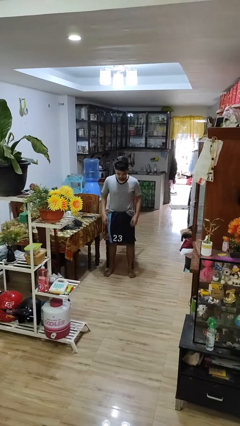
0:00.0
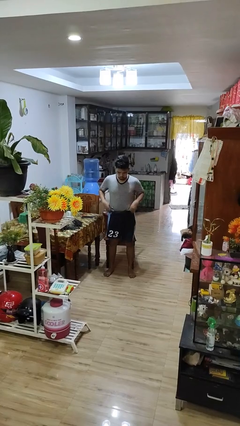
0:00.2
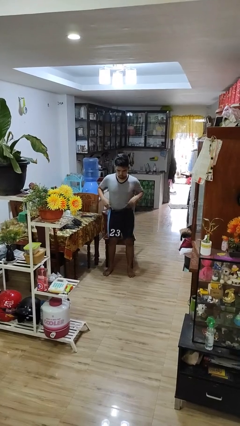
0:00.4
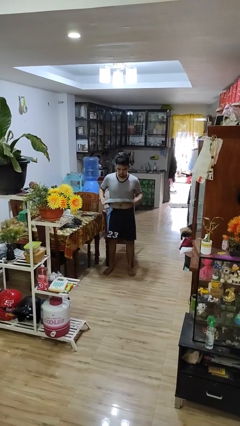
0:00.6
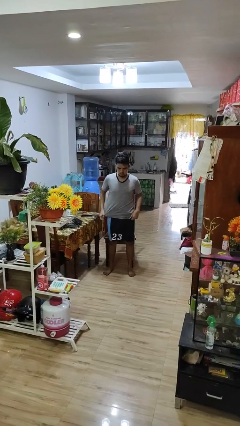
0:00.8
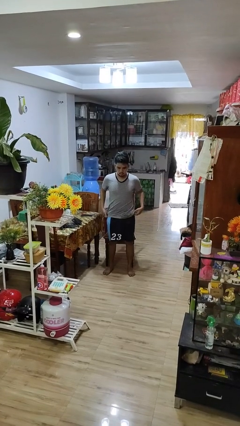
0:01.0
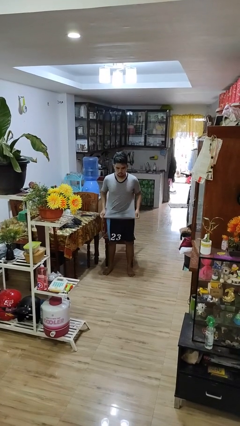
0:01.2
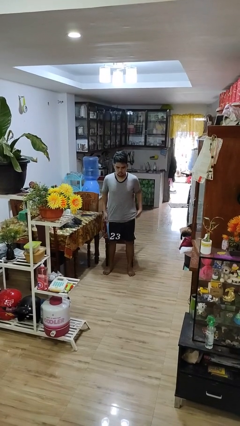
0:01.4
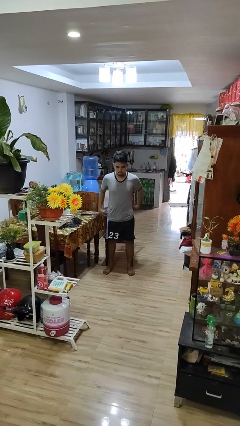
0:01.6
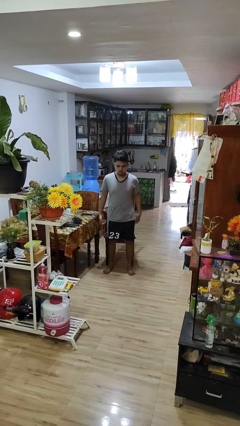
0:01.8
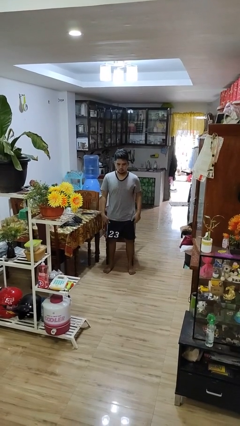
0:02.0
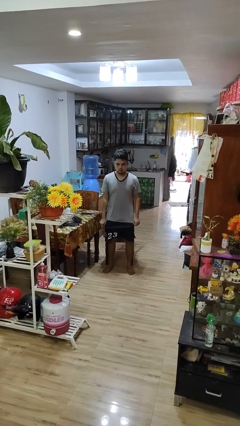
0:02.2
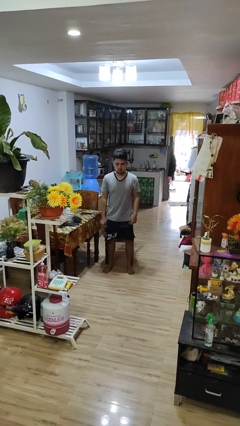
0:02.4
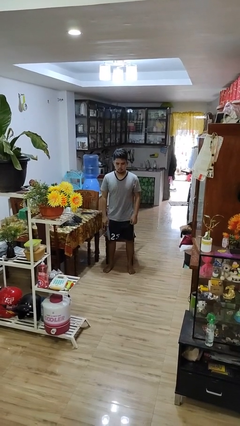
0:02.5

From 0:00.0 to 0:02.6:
person untucks shirt

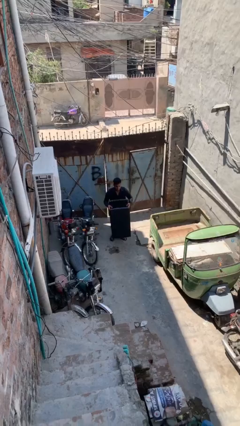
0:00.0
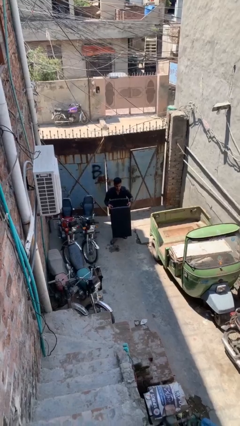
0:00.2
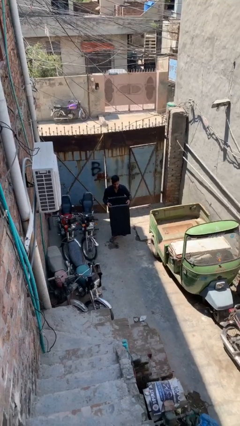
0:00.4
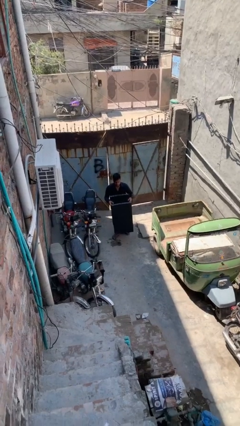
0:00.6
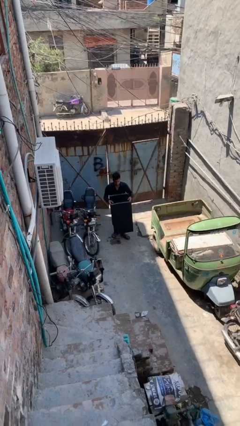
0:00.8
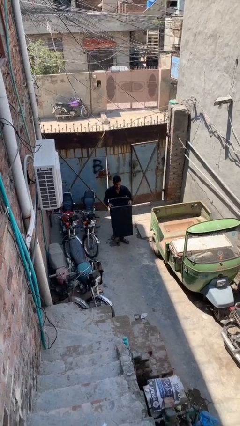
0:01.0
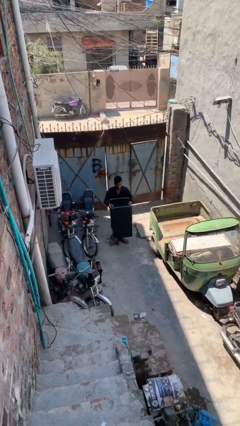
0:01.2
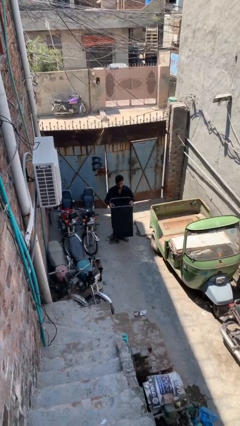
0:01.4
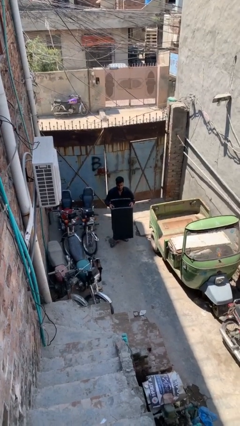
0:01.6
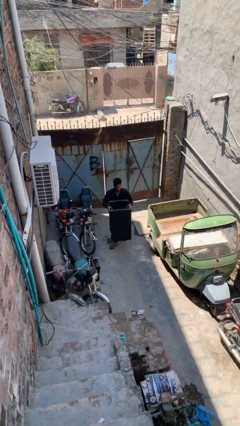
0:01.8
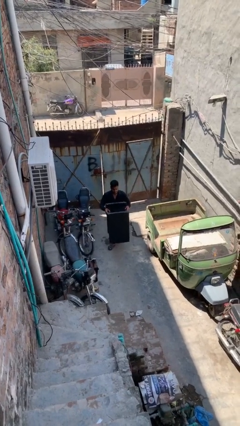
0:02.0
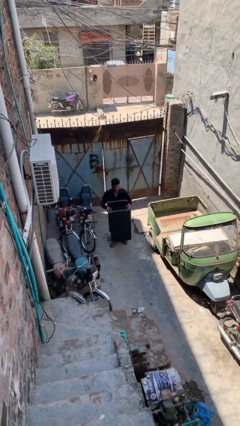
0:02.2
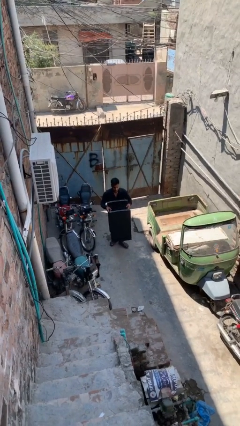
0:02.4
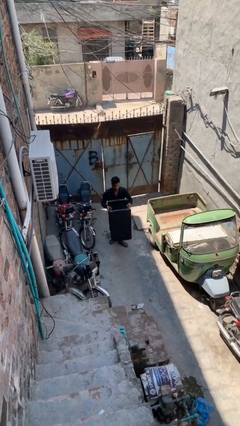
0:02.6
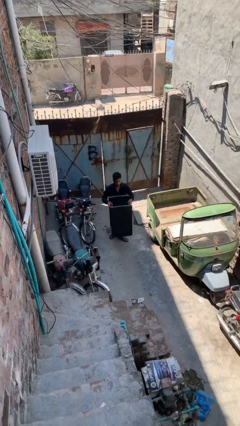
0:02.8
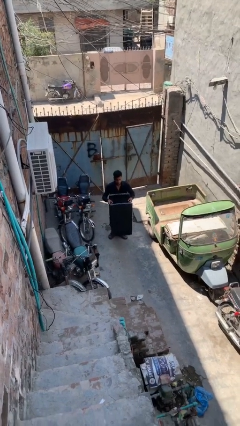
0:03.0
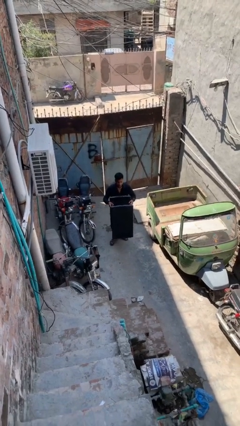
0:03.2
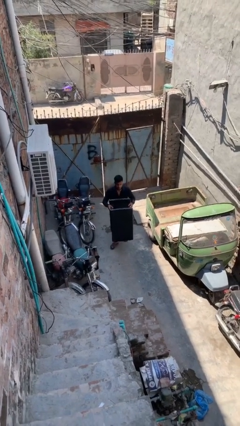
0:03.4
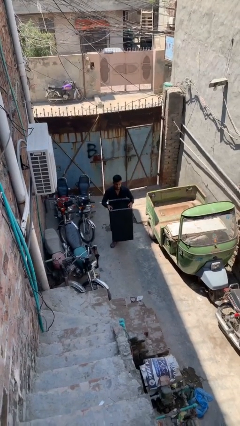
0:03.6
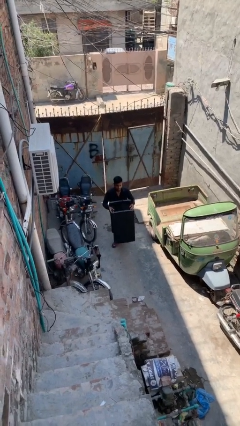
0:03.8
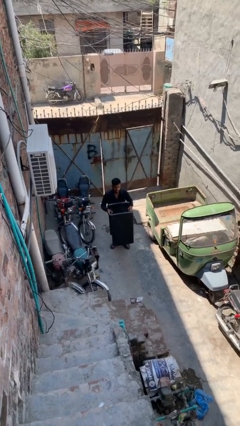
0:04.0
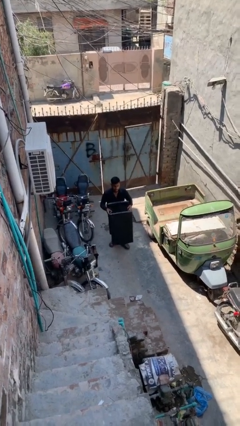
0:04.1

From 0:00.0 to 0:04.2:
person carries heavy object

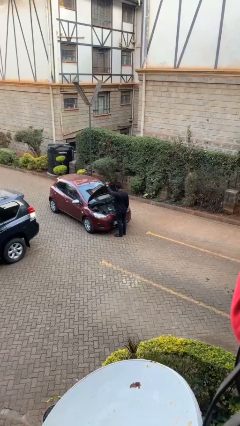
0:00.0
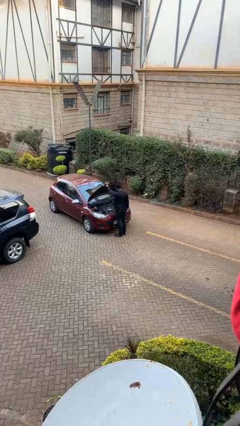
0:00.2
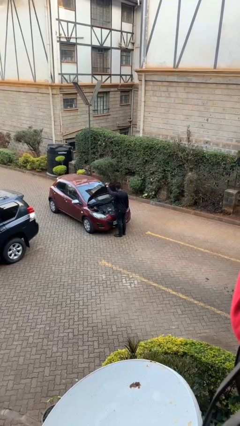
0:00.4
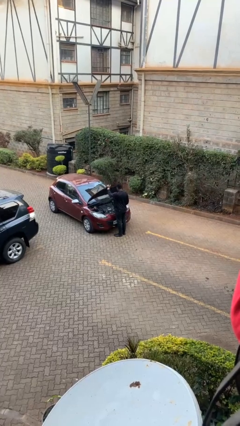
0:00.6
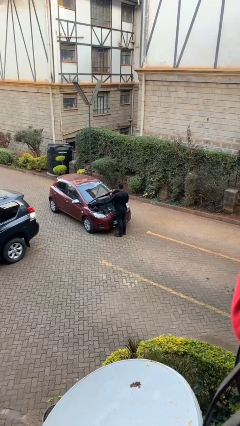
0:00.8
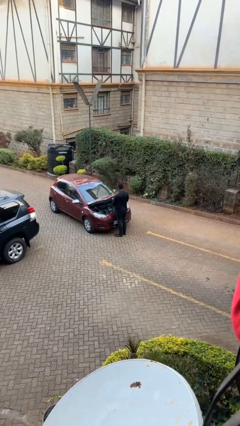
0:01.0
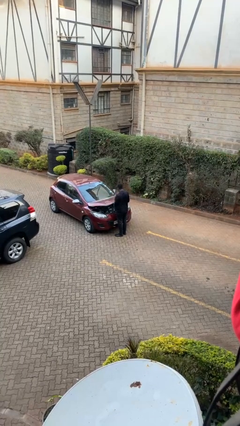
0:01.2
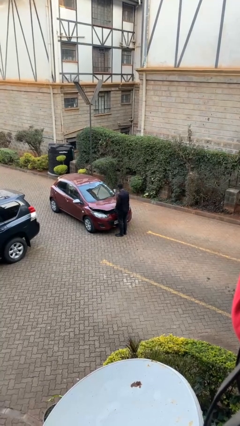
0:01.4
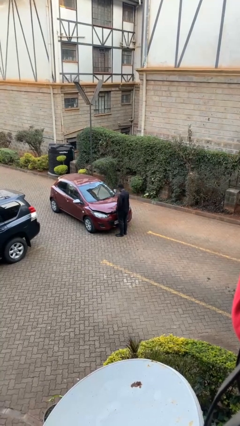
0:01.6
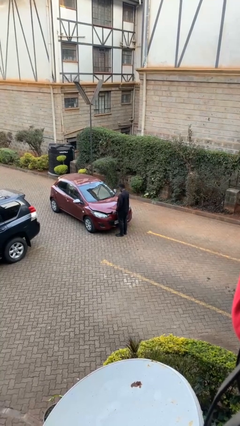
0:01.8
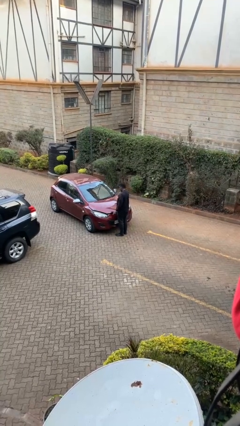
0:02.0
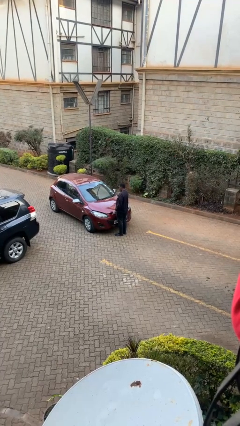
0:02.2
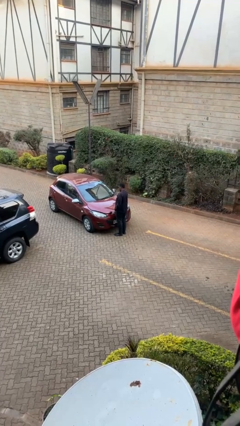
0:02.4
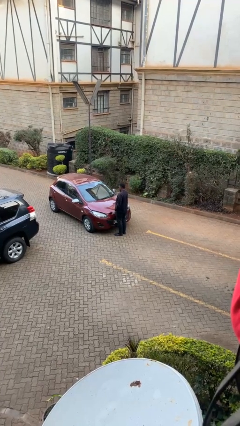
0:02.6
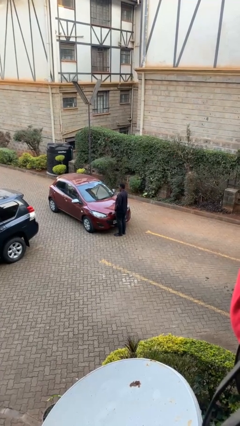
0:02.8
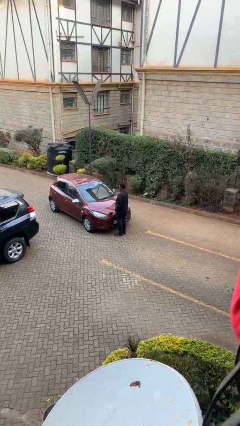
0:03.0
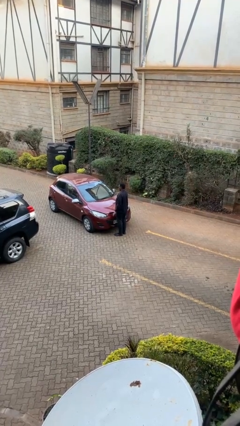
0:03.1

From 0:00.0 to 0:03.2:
person closes car hood

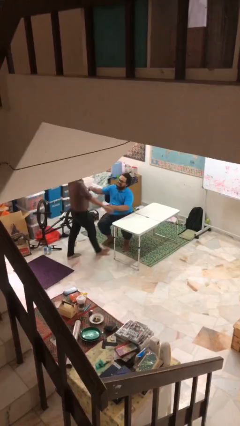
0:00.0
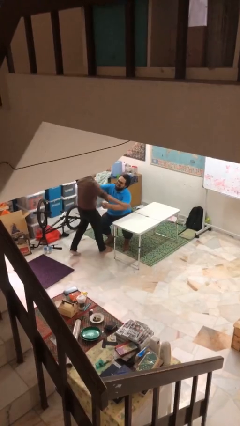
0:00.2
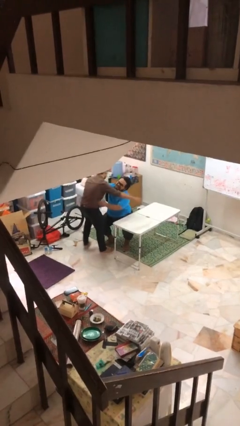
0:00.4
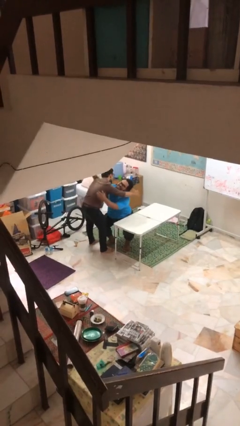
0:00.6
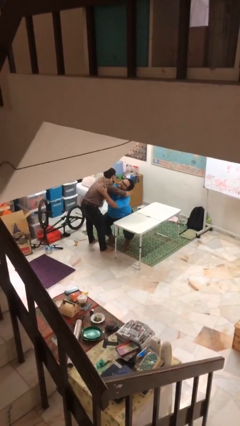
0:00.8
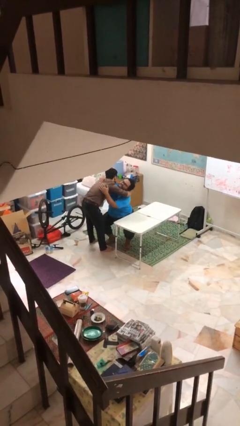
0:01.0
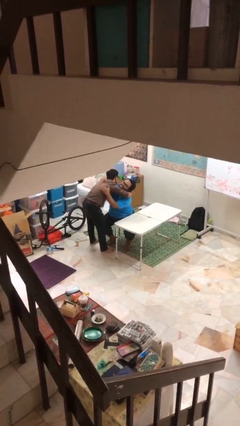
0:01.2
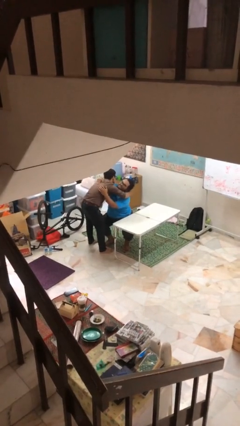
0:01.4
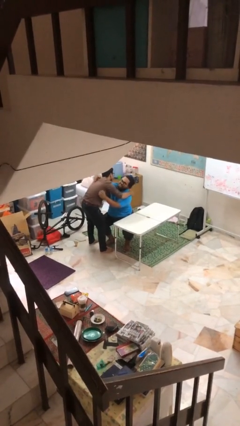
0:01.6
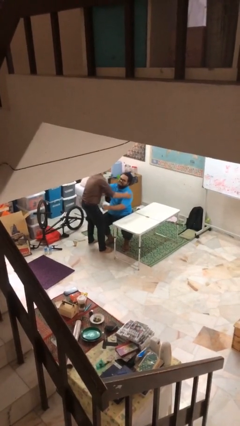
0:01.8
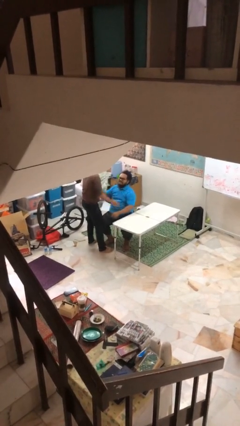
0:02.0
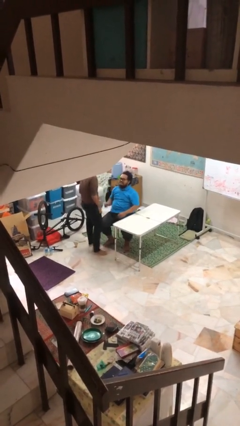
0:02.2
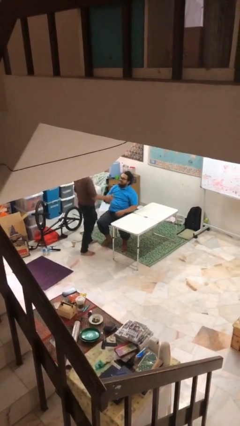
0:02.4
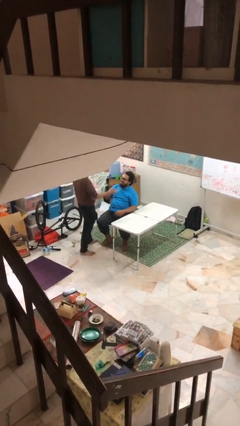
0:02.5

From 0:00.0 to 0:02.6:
person embraces person

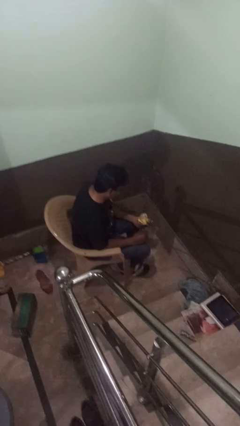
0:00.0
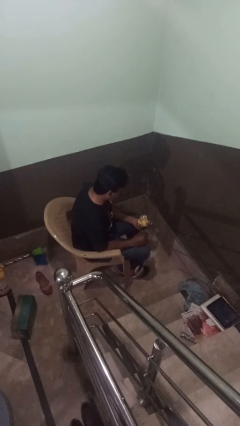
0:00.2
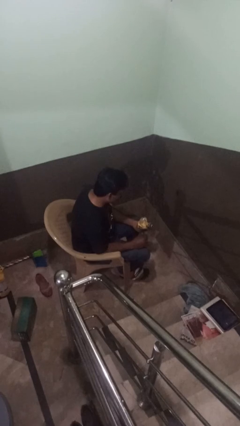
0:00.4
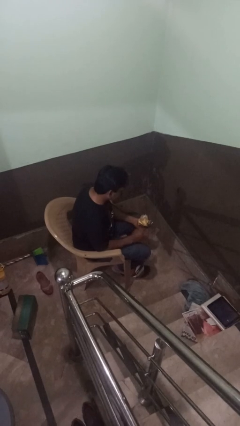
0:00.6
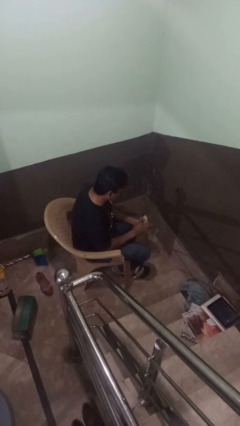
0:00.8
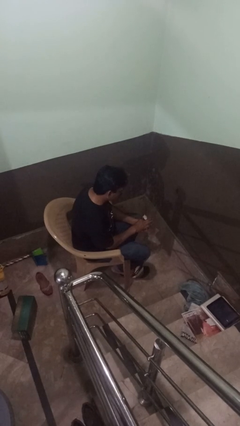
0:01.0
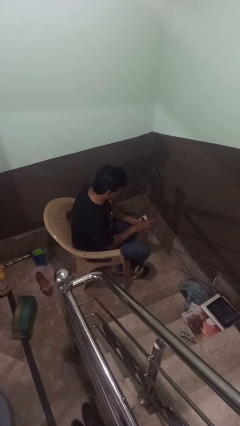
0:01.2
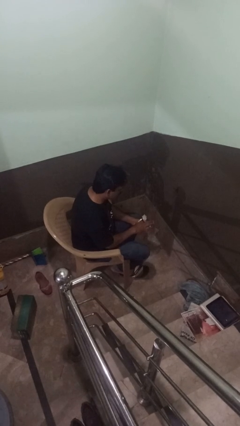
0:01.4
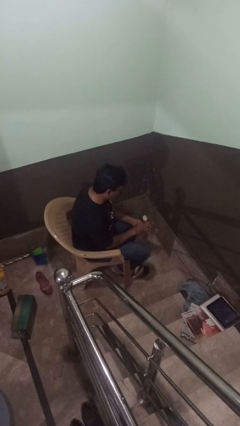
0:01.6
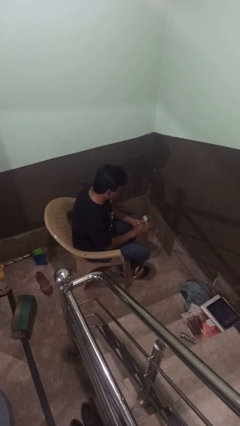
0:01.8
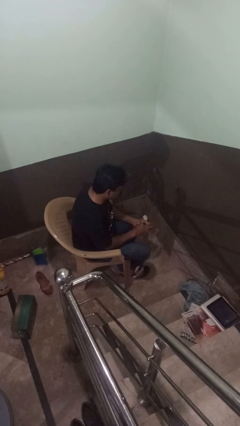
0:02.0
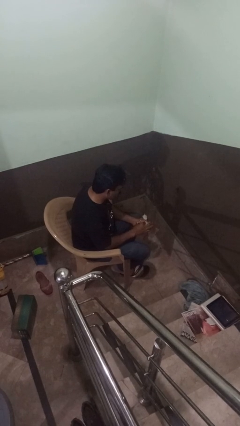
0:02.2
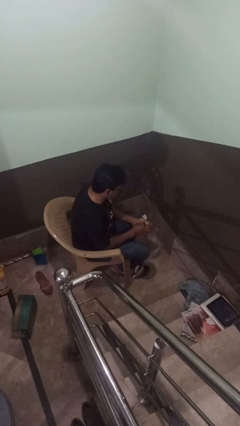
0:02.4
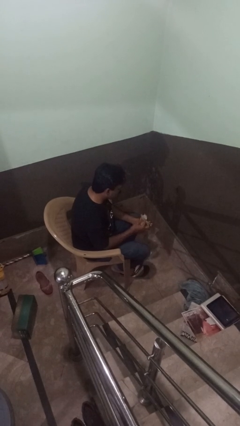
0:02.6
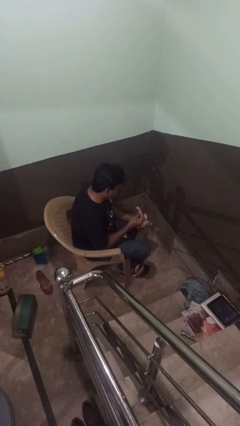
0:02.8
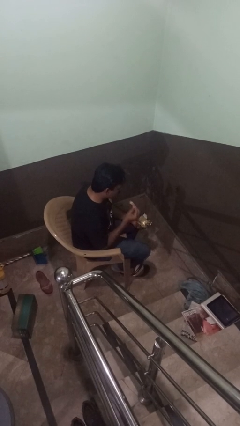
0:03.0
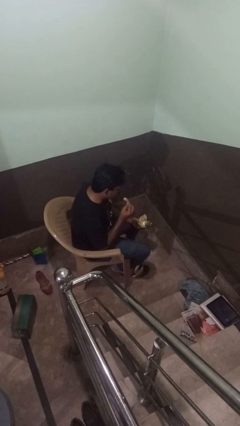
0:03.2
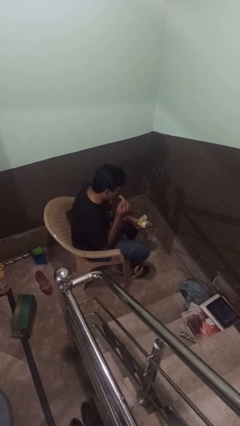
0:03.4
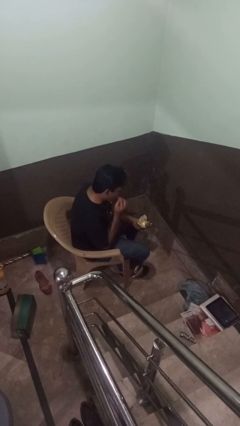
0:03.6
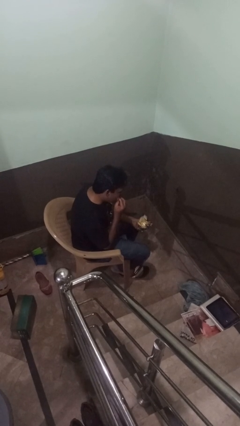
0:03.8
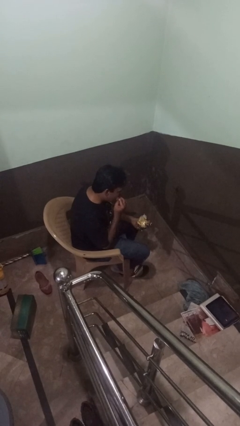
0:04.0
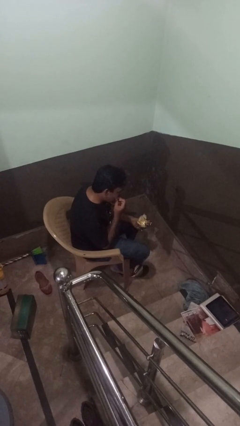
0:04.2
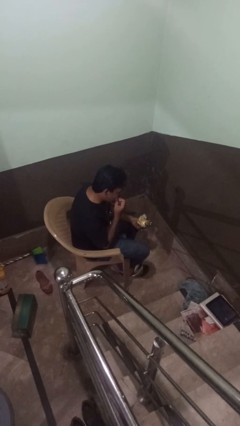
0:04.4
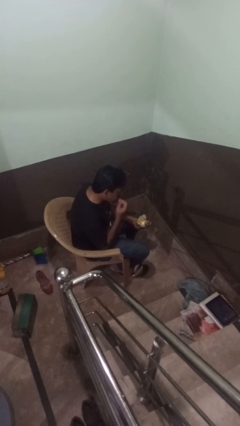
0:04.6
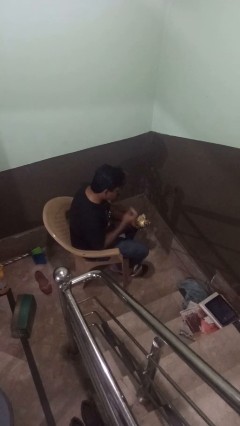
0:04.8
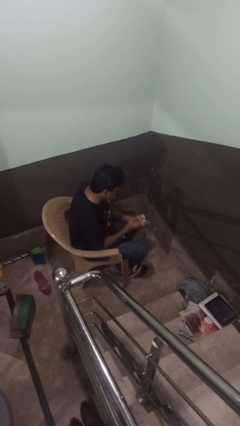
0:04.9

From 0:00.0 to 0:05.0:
person eats snack from bag
